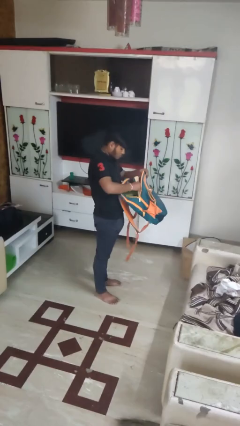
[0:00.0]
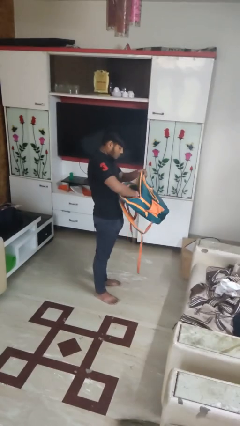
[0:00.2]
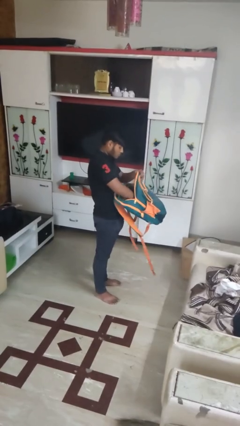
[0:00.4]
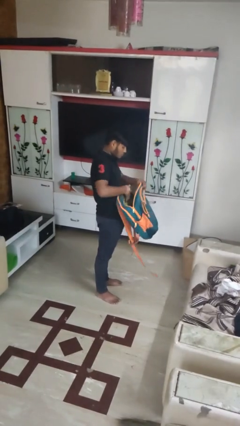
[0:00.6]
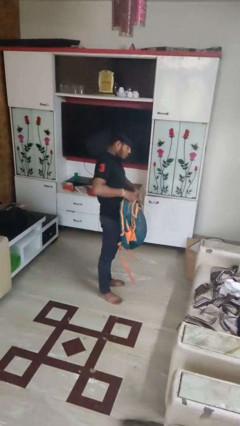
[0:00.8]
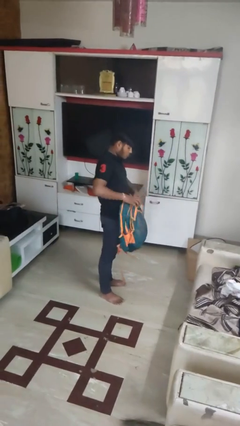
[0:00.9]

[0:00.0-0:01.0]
person puts object into backpack

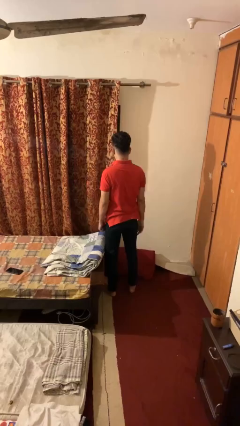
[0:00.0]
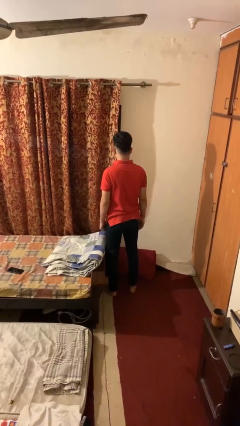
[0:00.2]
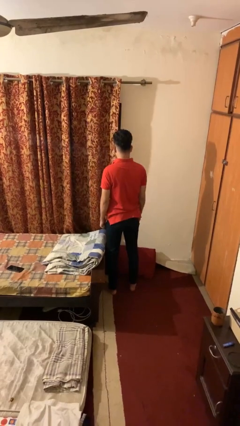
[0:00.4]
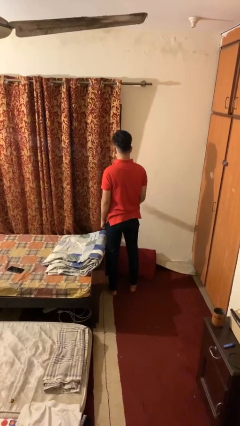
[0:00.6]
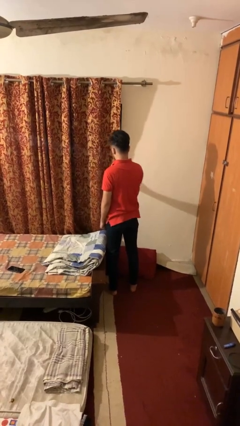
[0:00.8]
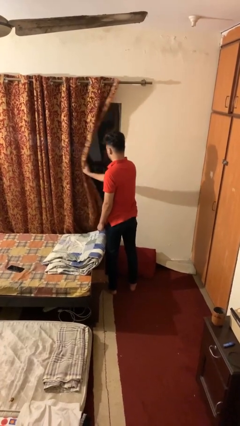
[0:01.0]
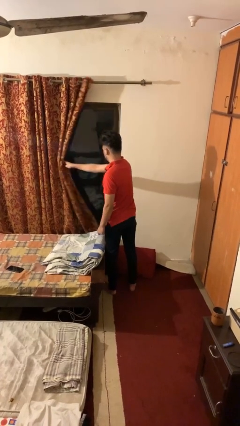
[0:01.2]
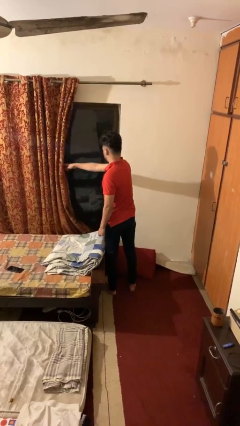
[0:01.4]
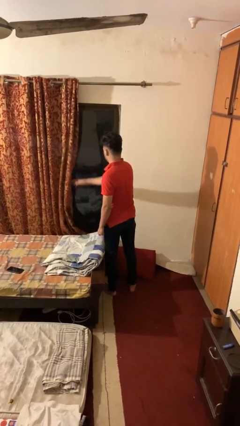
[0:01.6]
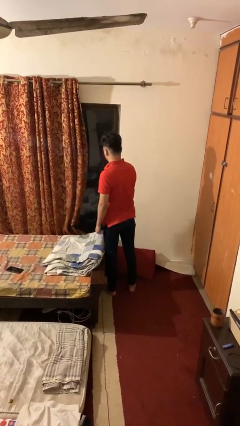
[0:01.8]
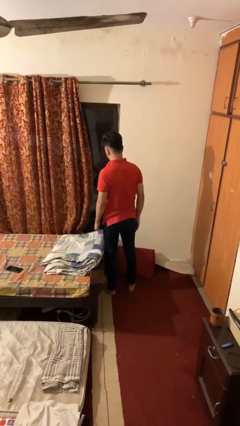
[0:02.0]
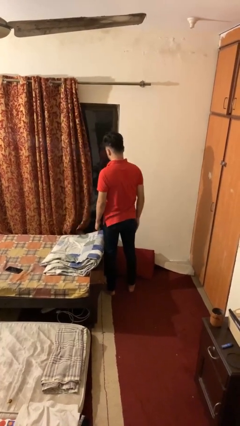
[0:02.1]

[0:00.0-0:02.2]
person opens curtains

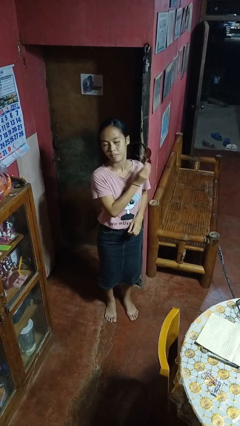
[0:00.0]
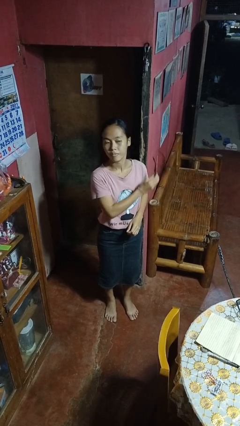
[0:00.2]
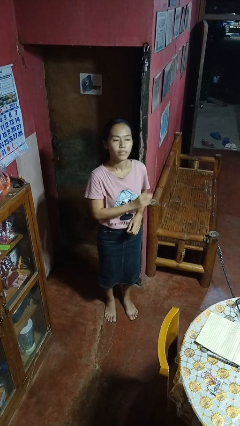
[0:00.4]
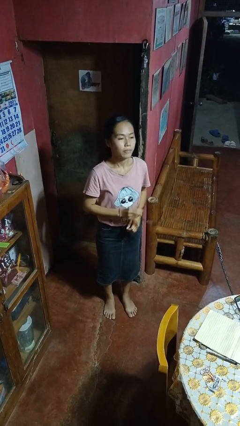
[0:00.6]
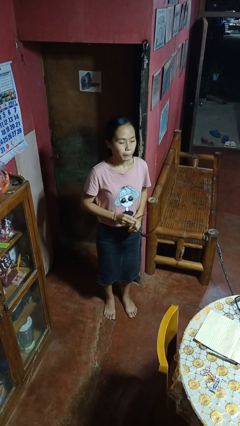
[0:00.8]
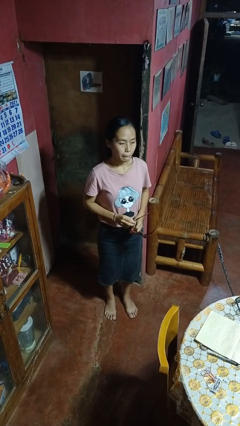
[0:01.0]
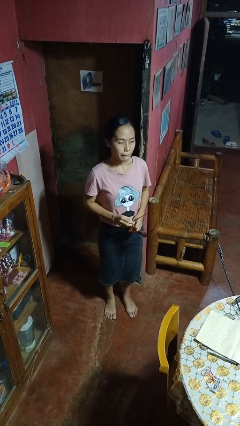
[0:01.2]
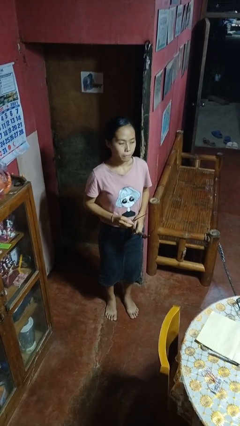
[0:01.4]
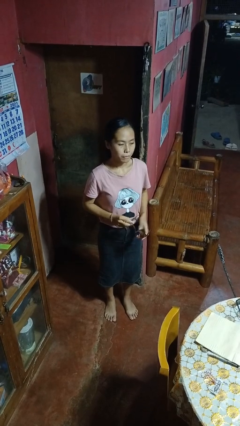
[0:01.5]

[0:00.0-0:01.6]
person takes off sunglasses

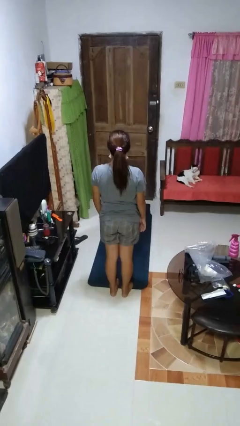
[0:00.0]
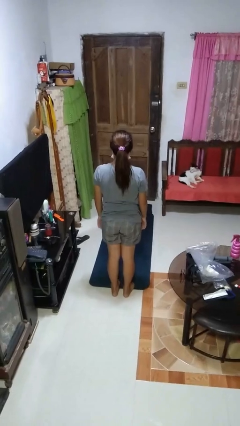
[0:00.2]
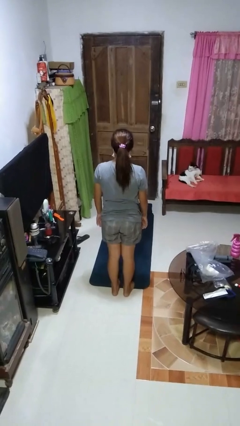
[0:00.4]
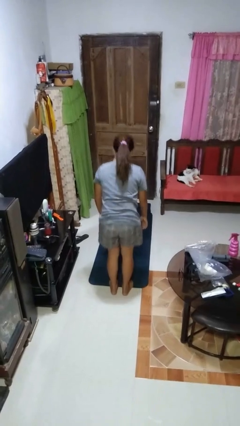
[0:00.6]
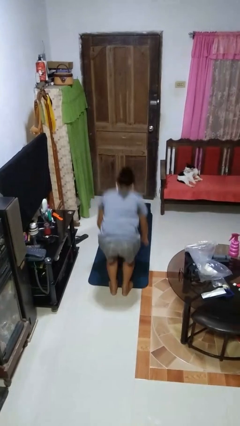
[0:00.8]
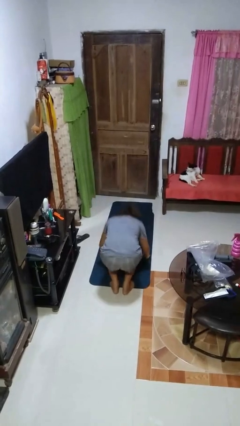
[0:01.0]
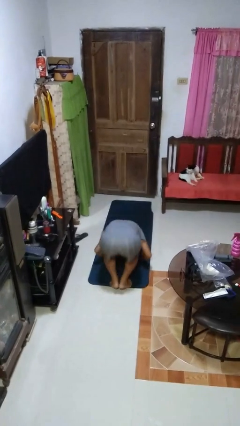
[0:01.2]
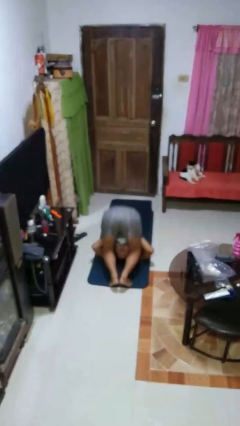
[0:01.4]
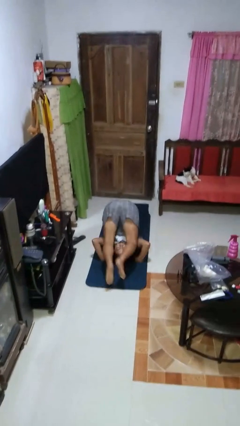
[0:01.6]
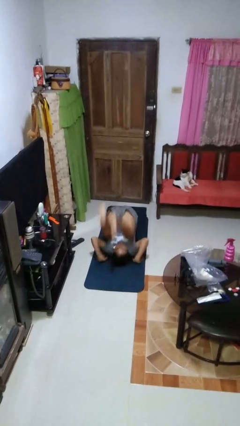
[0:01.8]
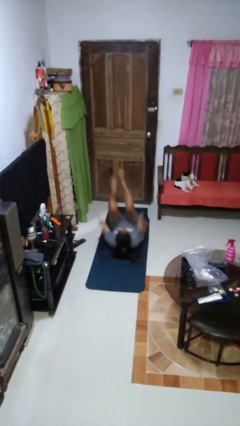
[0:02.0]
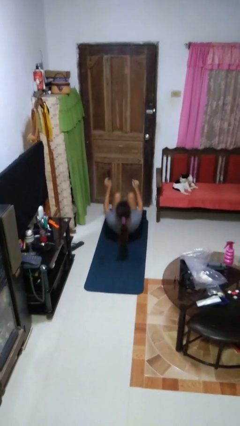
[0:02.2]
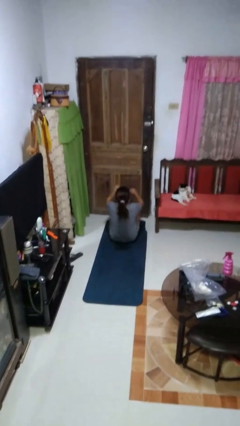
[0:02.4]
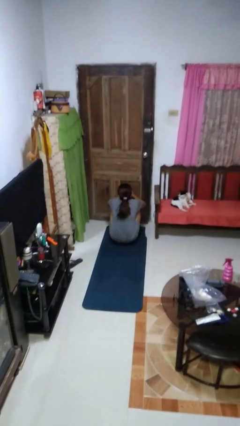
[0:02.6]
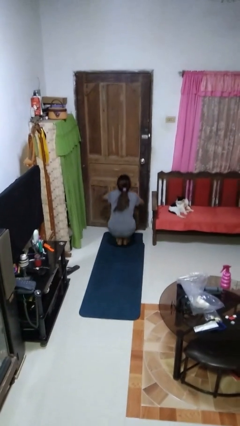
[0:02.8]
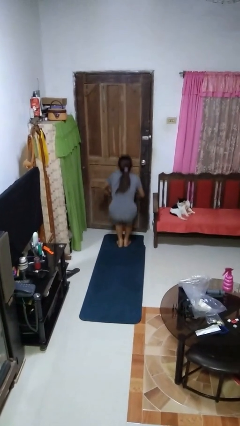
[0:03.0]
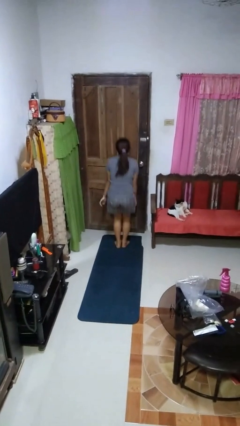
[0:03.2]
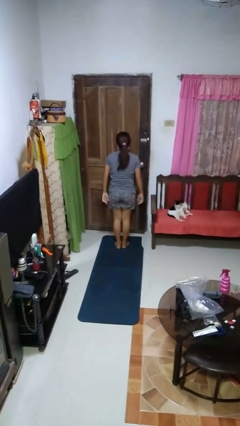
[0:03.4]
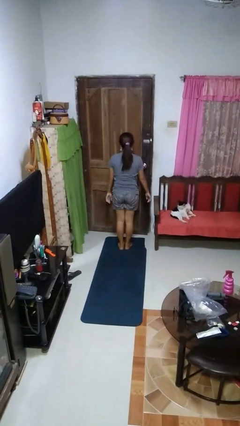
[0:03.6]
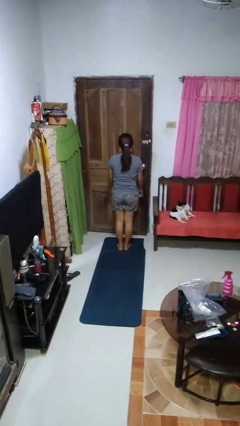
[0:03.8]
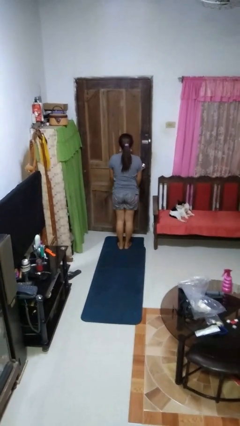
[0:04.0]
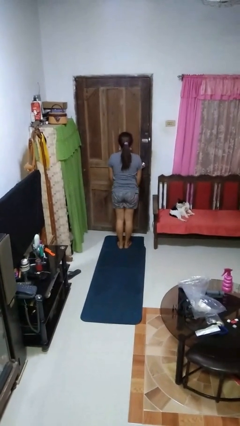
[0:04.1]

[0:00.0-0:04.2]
person somersaults

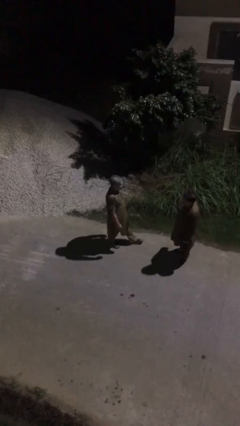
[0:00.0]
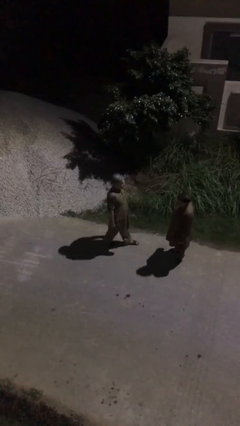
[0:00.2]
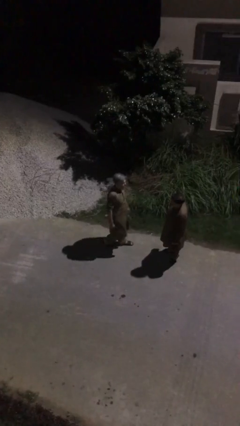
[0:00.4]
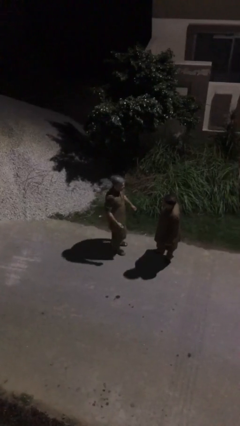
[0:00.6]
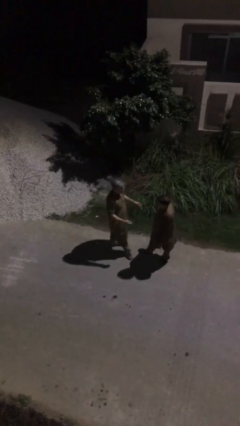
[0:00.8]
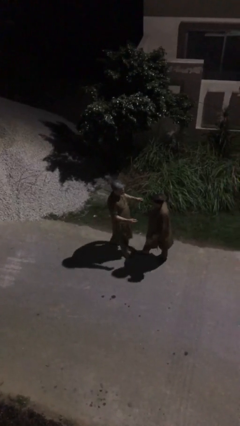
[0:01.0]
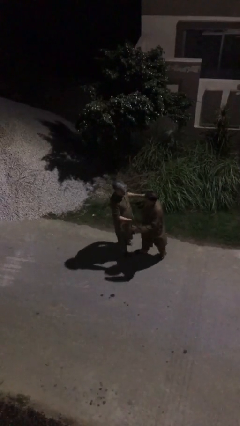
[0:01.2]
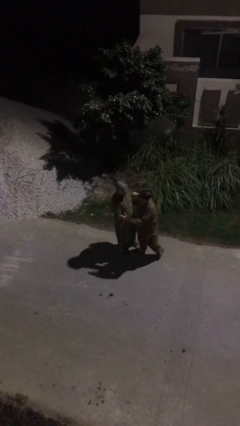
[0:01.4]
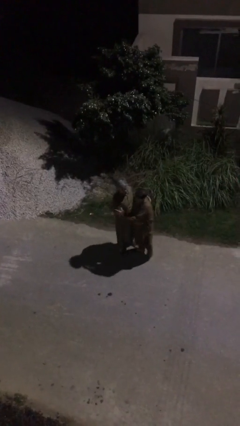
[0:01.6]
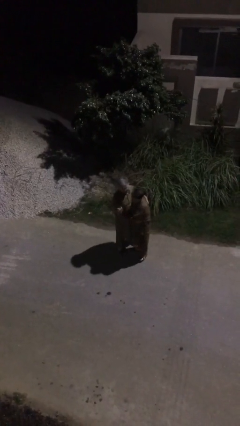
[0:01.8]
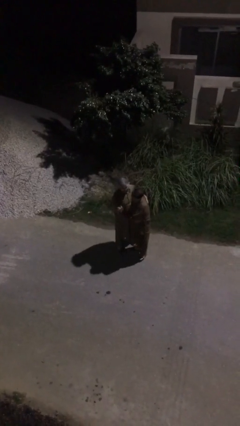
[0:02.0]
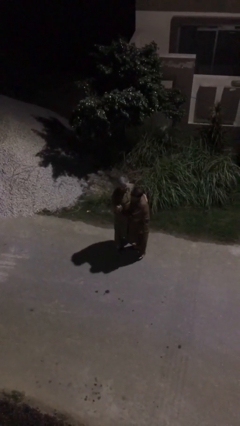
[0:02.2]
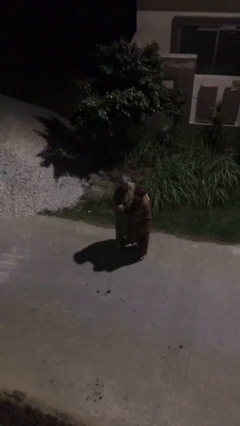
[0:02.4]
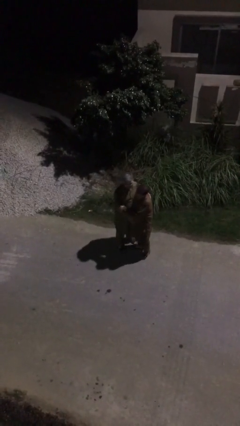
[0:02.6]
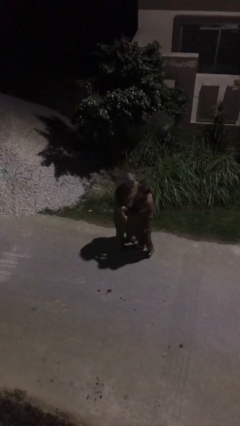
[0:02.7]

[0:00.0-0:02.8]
person embraces person

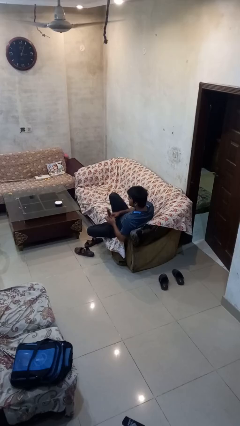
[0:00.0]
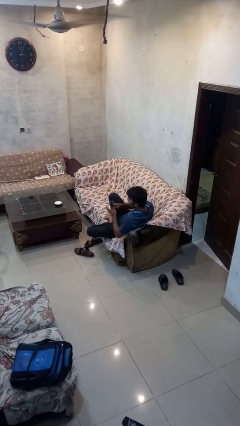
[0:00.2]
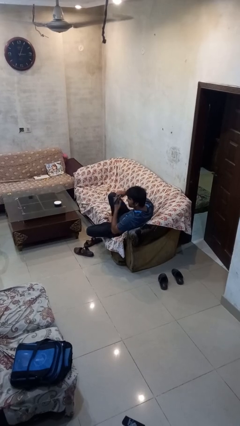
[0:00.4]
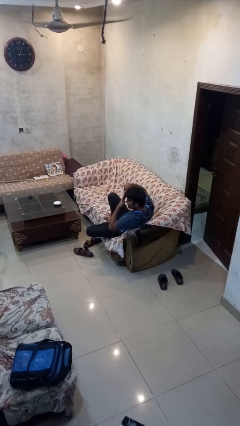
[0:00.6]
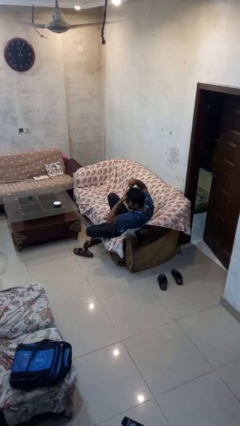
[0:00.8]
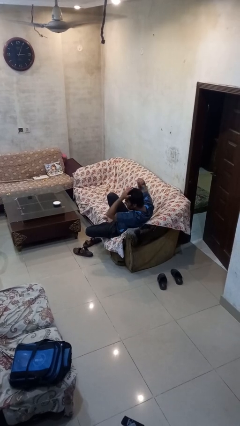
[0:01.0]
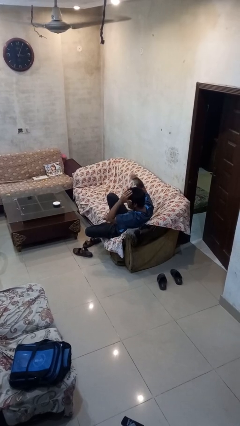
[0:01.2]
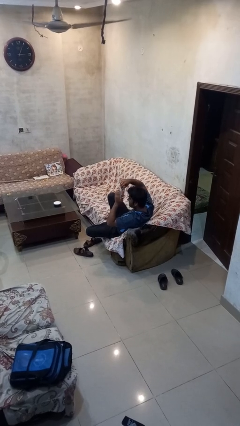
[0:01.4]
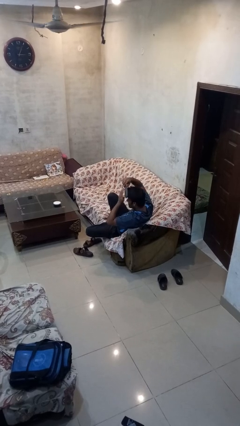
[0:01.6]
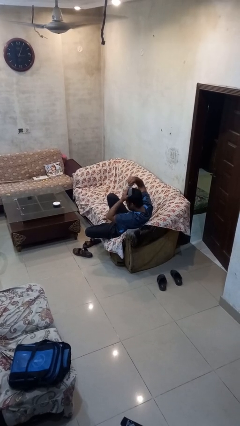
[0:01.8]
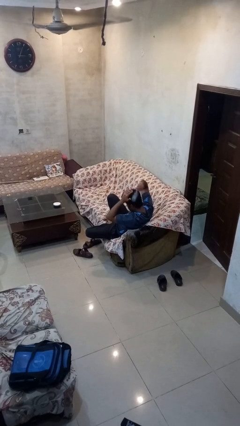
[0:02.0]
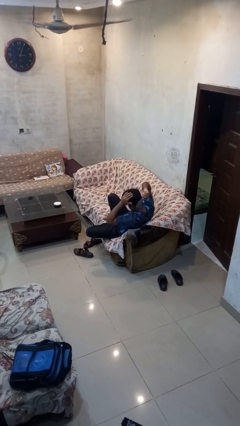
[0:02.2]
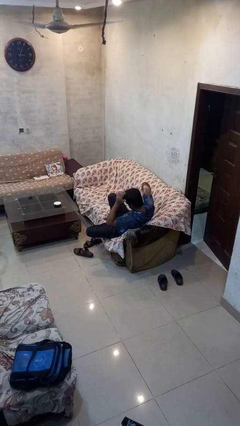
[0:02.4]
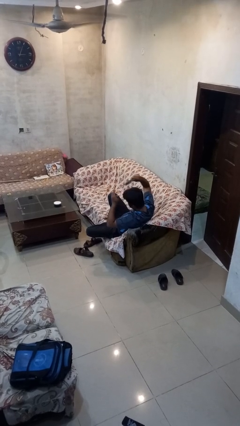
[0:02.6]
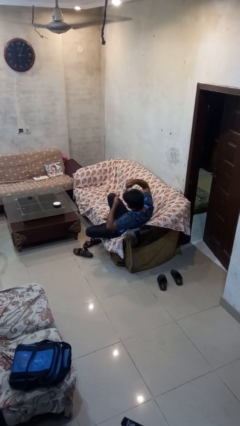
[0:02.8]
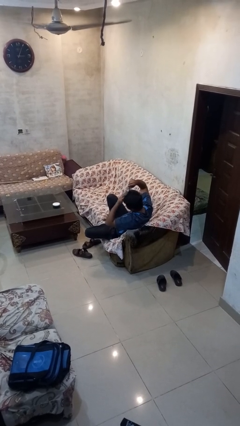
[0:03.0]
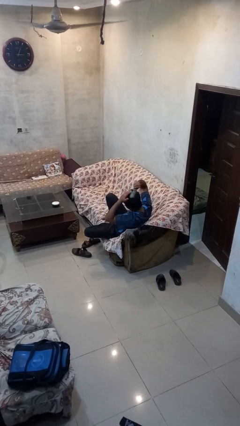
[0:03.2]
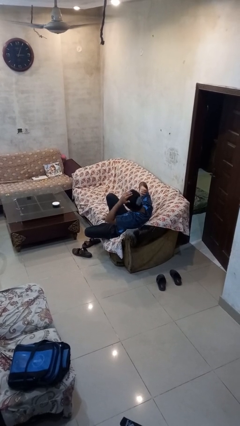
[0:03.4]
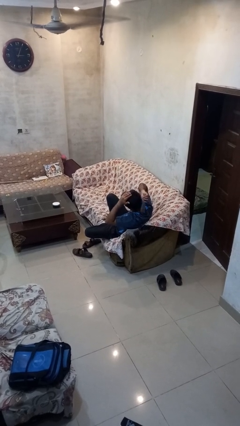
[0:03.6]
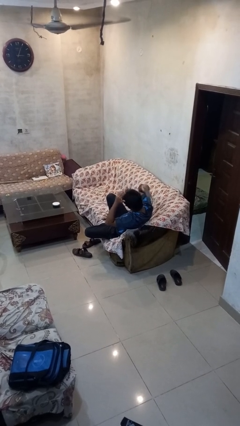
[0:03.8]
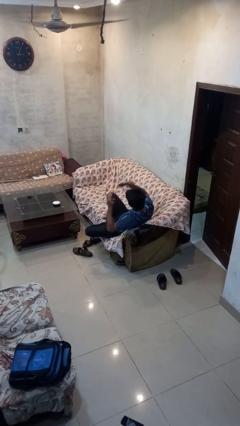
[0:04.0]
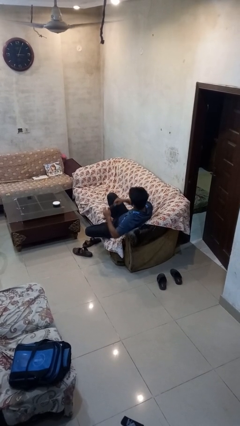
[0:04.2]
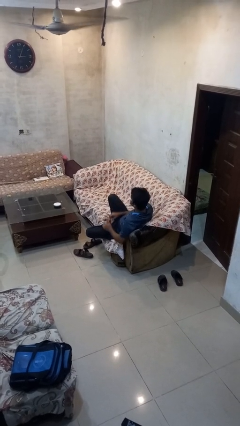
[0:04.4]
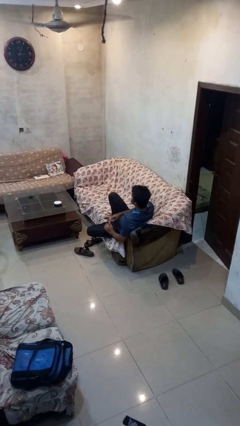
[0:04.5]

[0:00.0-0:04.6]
person brushes hair

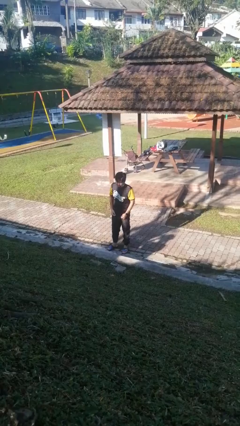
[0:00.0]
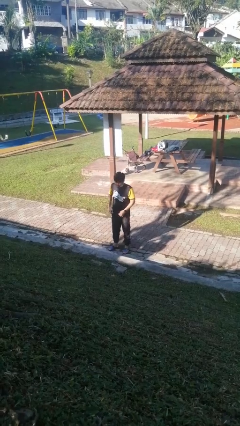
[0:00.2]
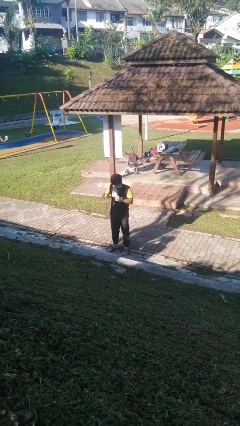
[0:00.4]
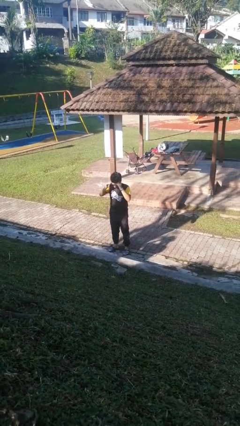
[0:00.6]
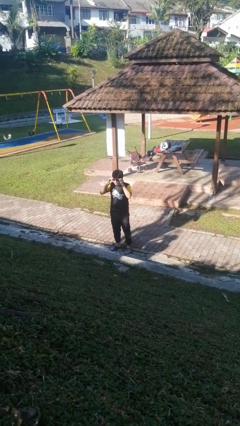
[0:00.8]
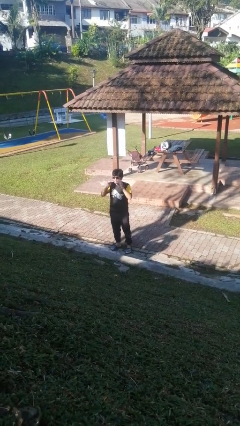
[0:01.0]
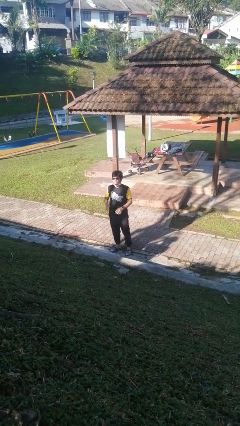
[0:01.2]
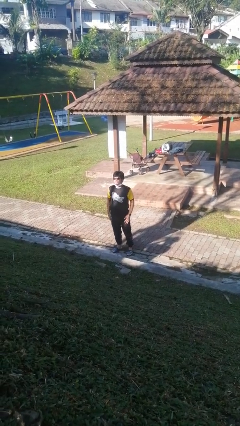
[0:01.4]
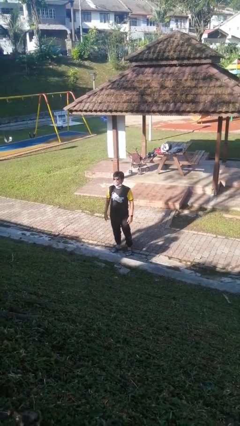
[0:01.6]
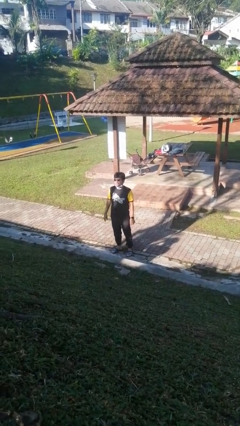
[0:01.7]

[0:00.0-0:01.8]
person puts on sunglasses
